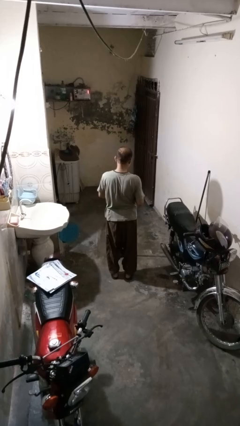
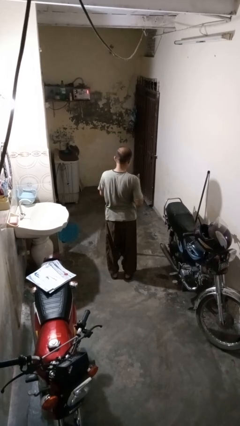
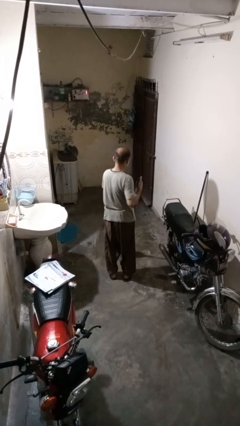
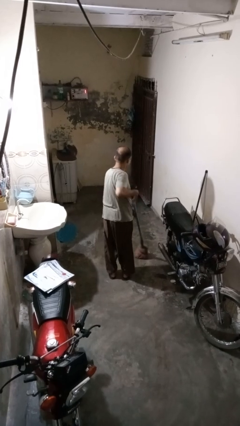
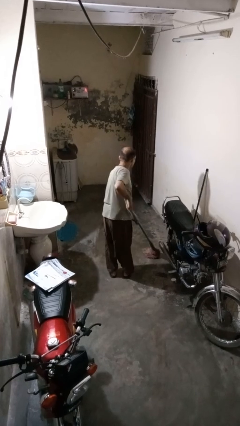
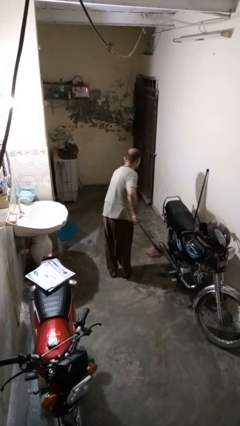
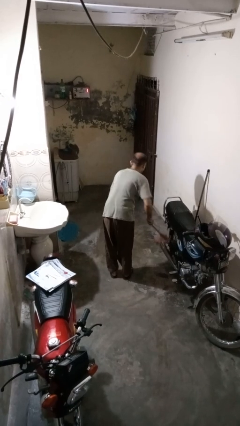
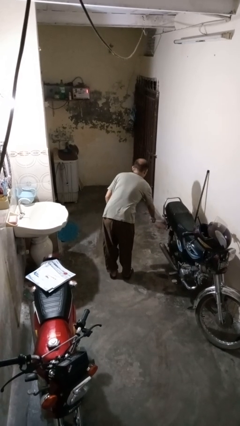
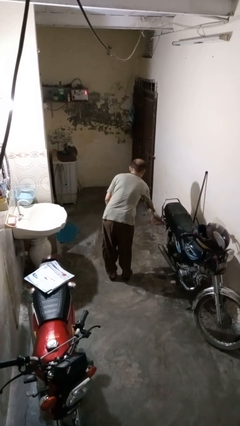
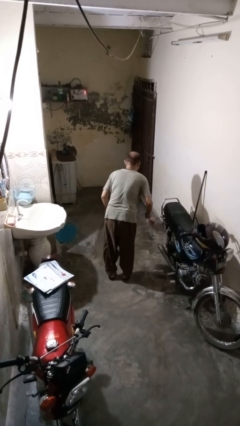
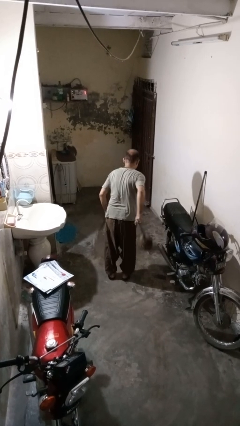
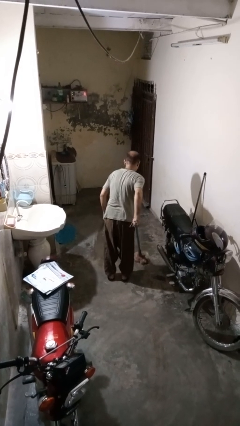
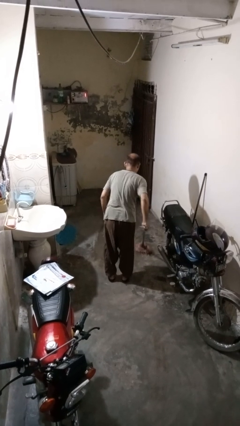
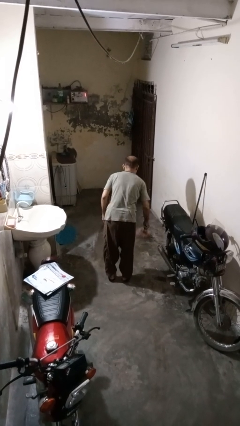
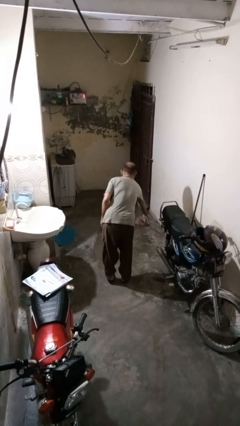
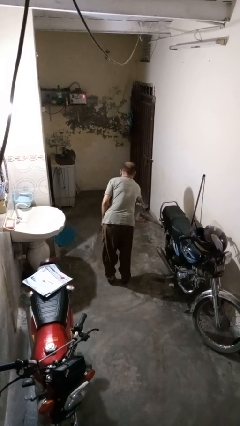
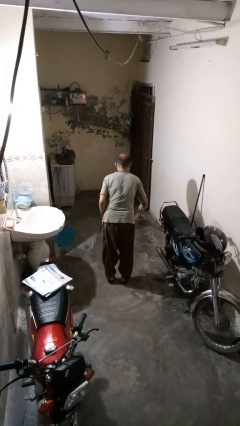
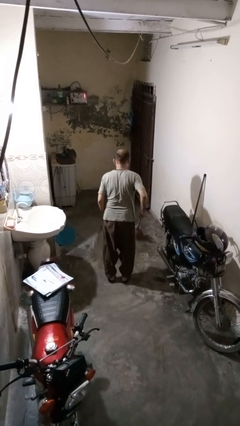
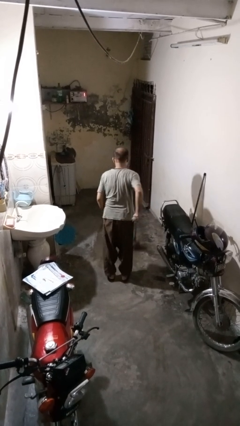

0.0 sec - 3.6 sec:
person mops

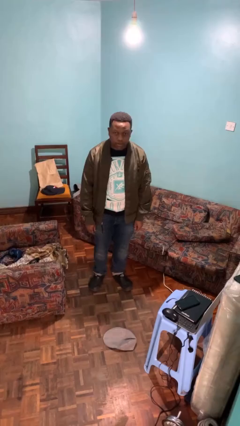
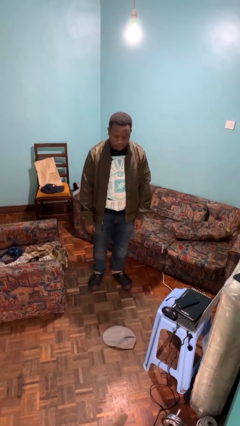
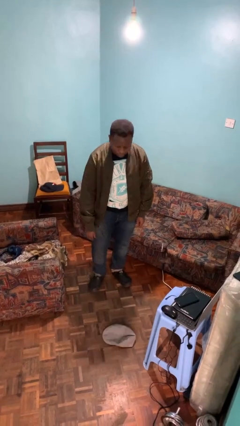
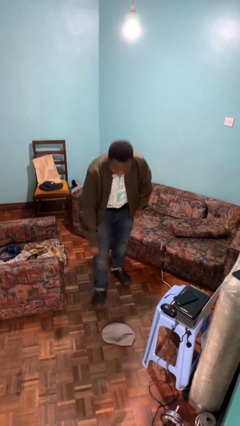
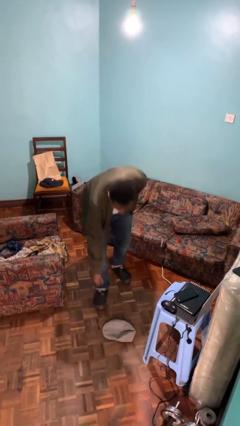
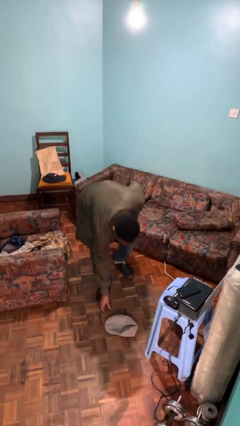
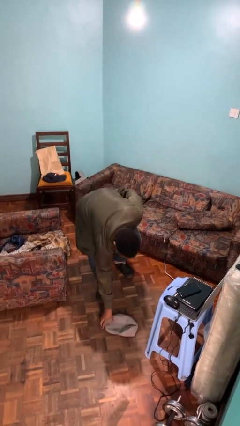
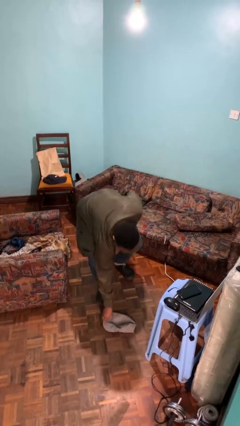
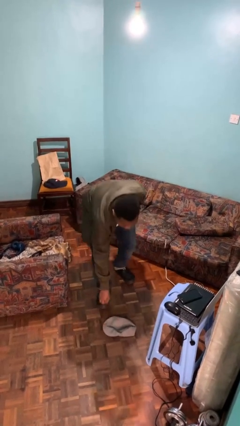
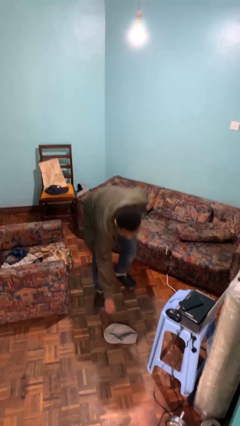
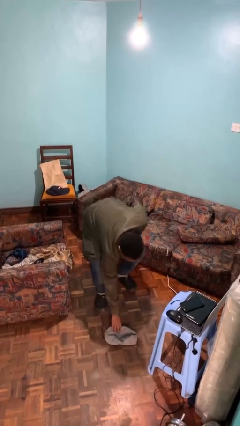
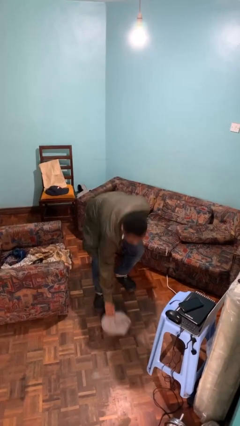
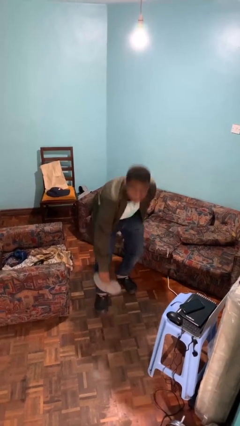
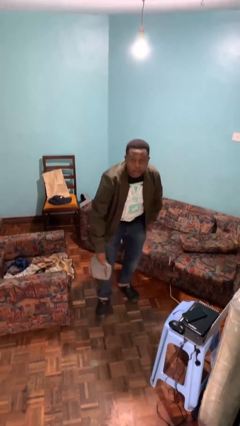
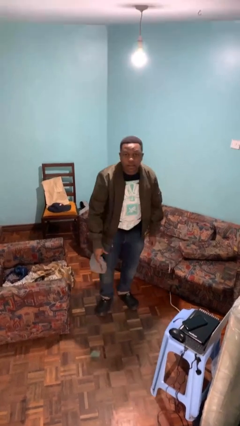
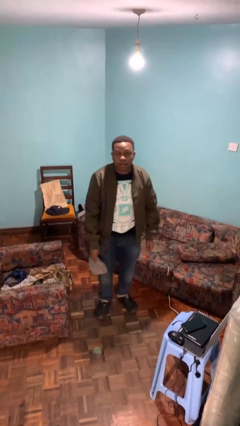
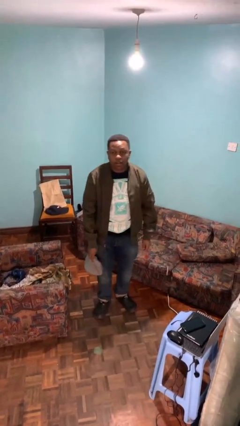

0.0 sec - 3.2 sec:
person picks up object from floor

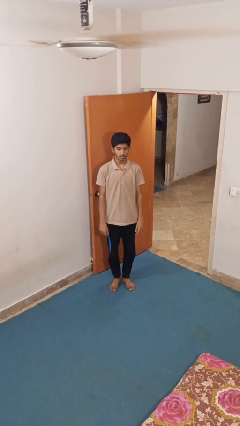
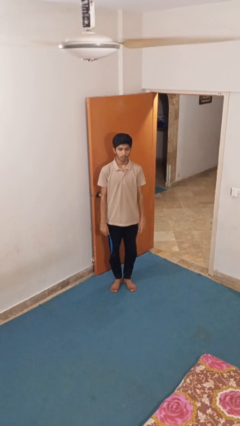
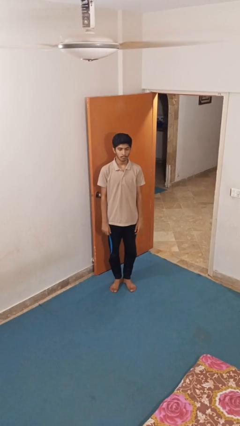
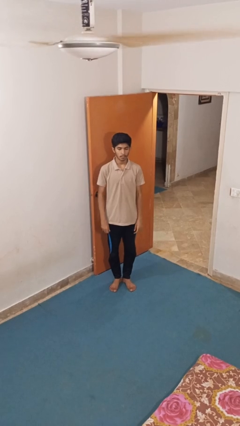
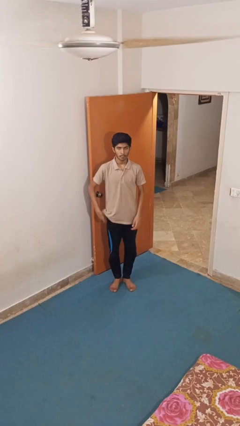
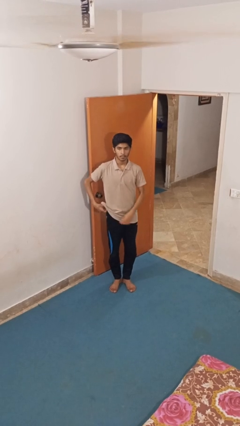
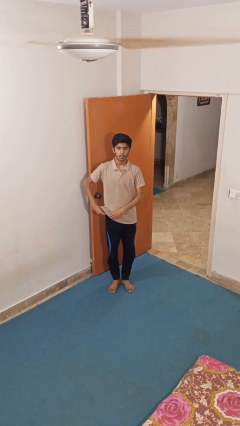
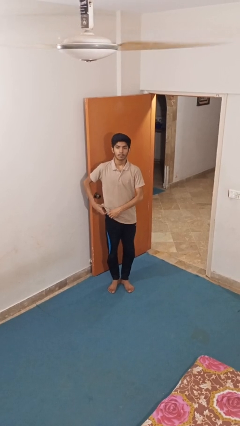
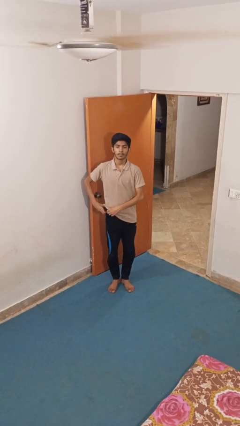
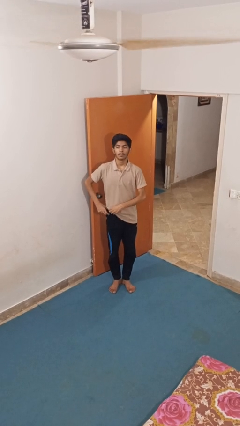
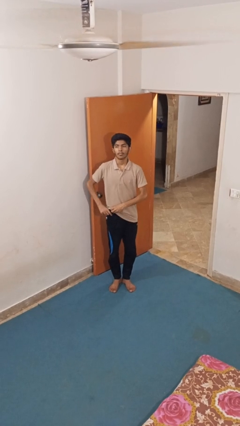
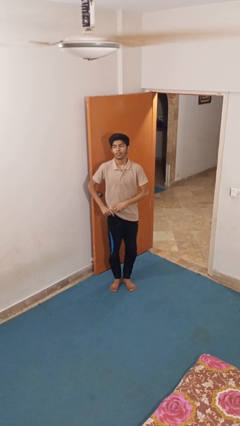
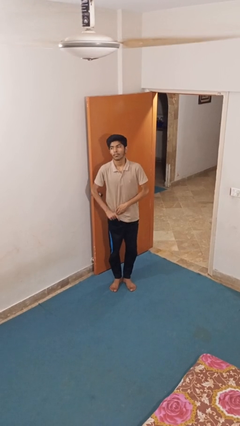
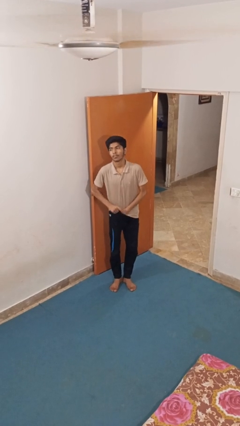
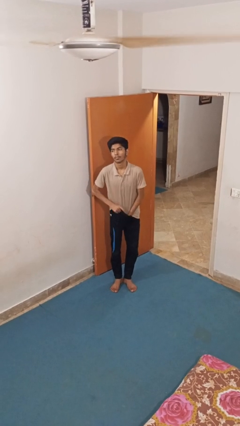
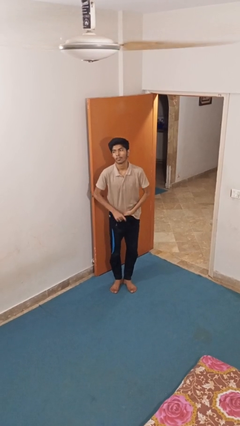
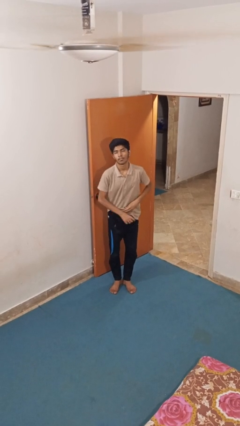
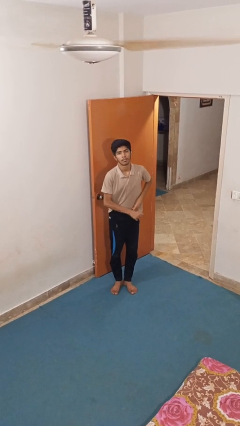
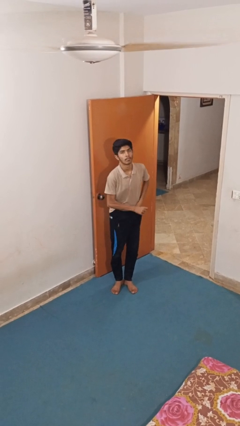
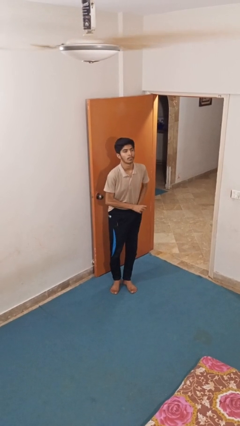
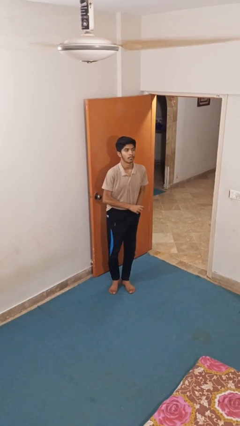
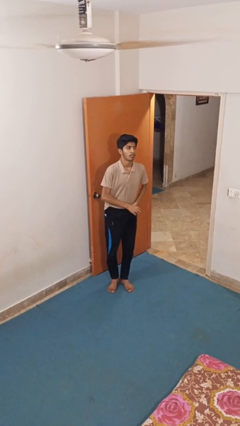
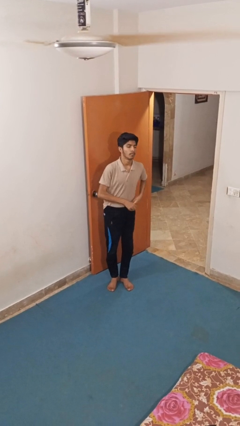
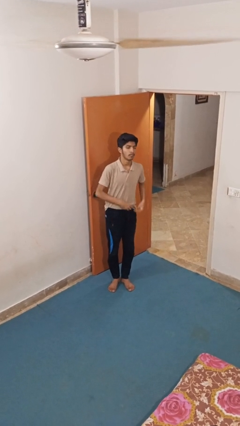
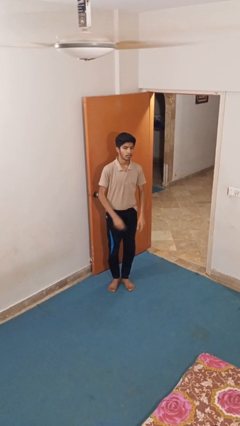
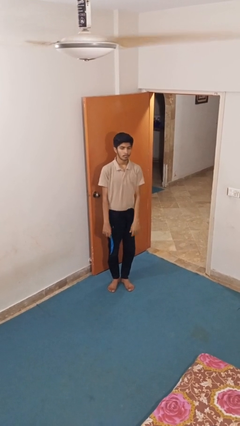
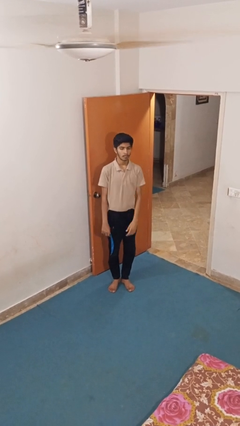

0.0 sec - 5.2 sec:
person tucks in shirt

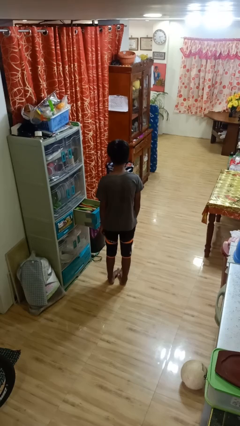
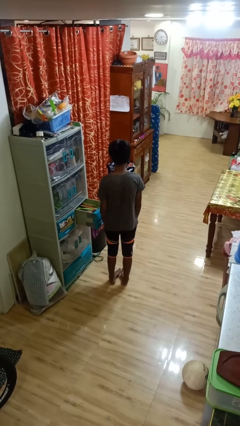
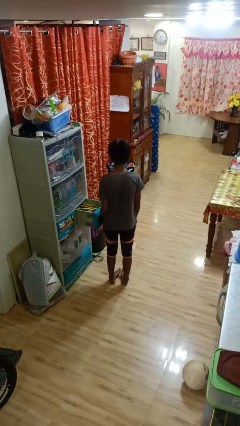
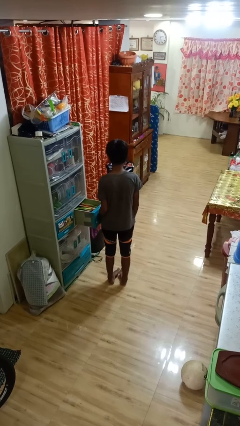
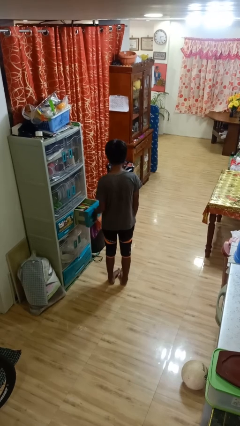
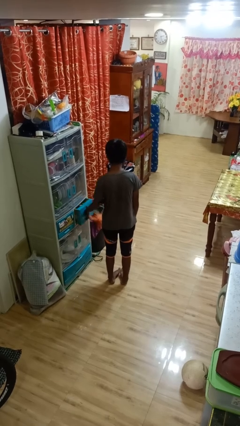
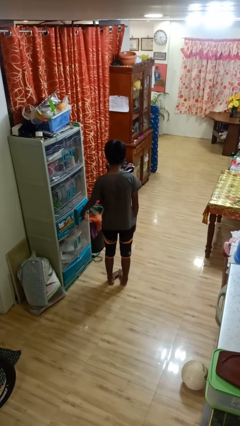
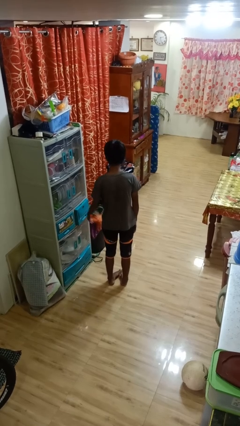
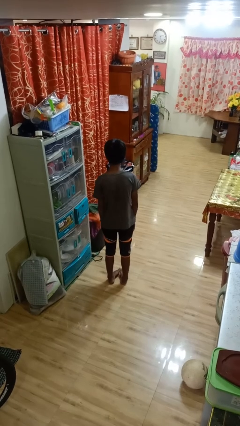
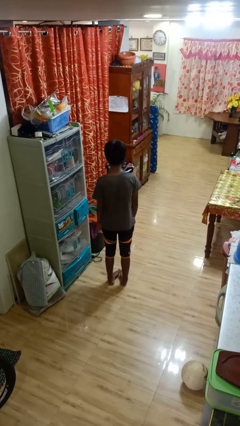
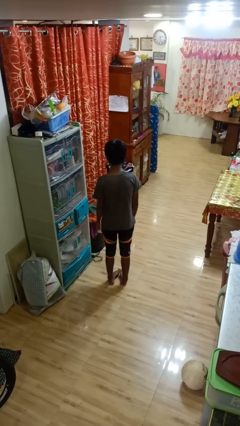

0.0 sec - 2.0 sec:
person closes kitchen drawer

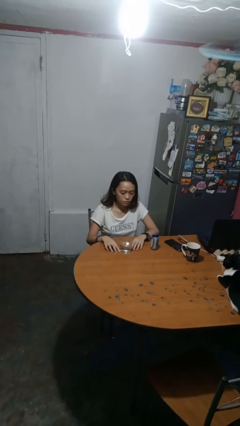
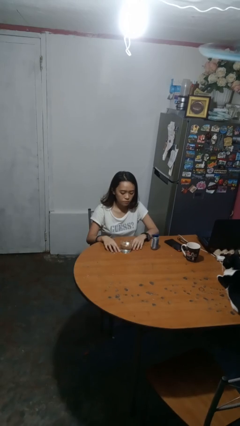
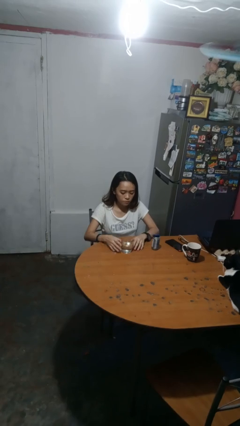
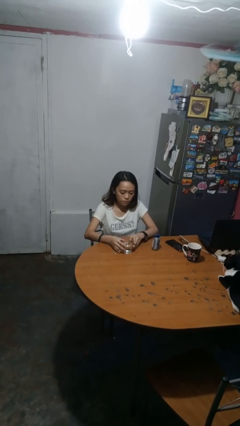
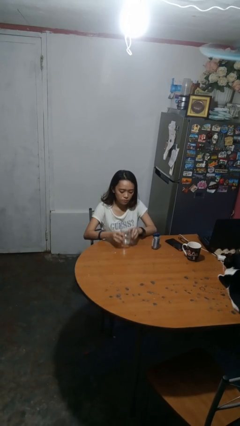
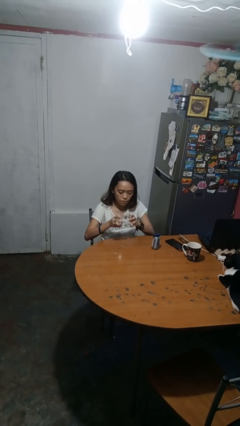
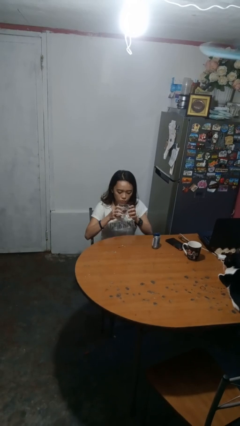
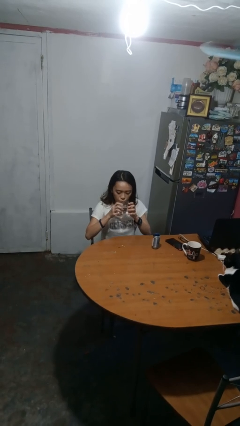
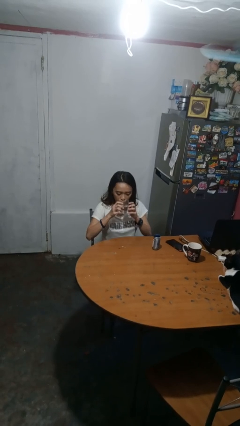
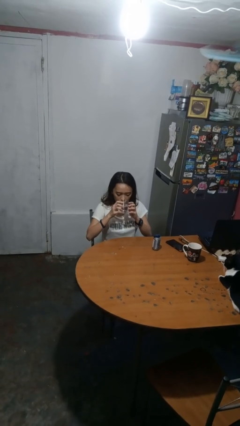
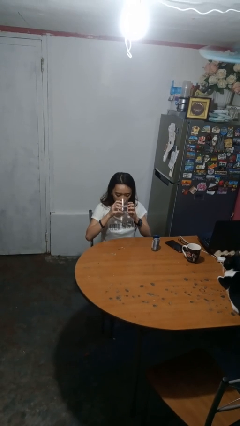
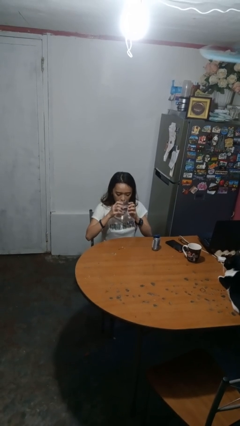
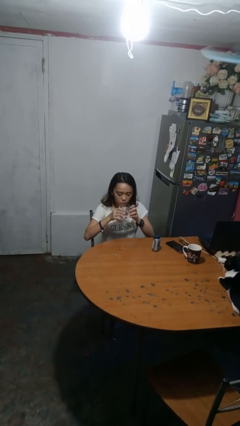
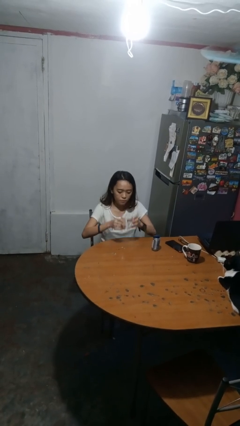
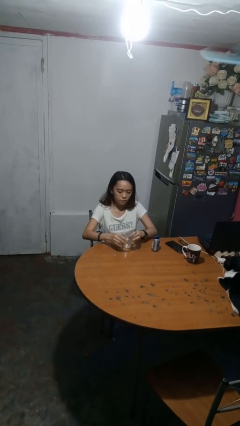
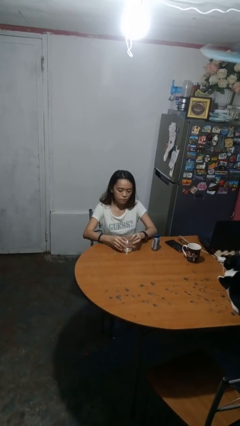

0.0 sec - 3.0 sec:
person drinks from cup

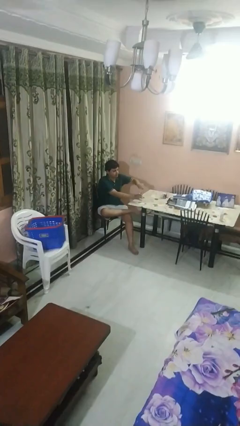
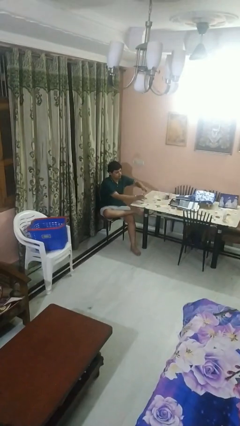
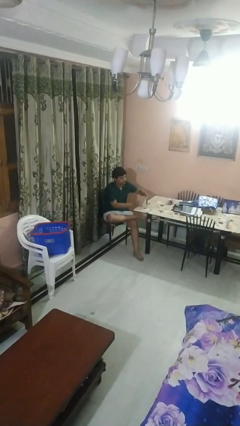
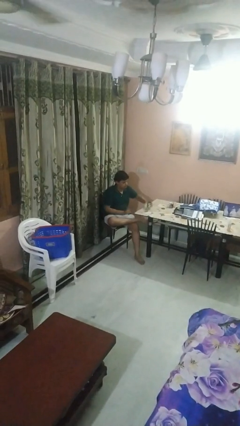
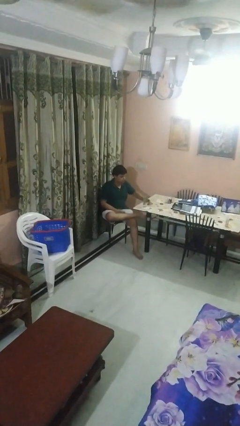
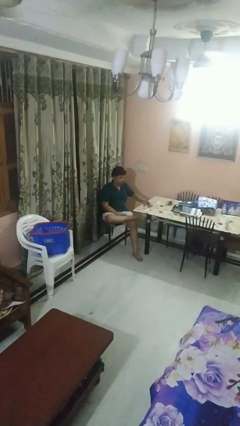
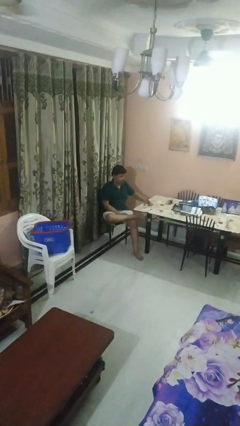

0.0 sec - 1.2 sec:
person unscrews lid from bottle
